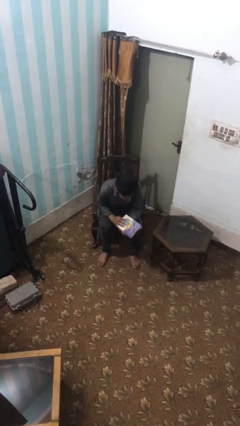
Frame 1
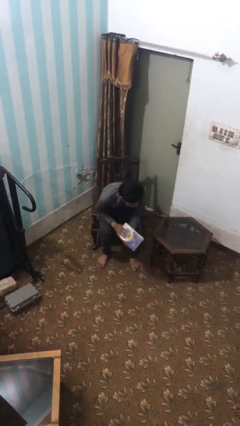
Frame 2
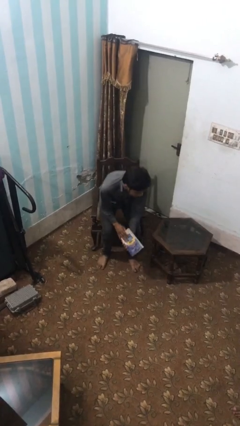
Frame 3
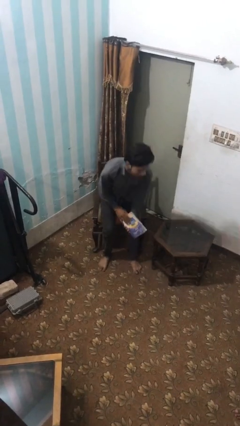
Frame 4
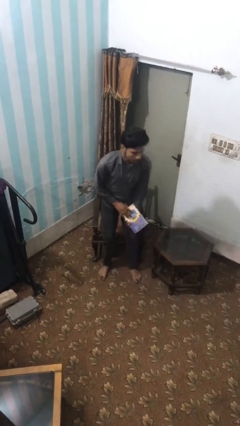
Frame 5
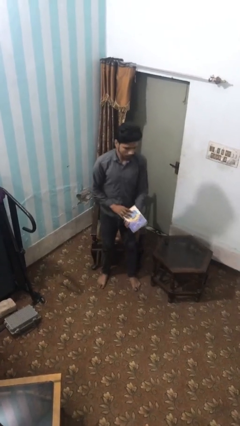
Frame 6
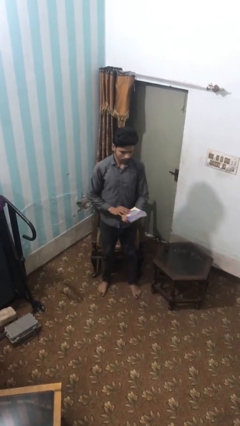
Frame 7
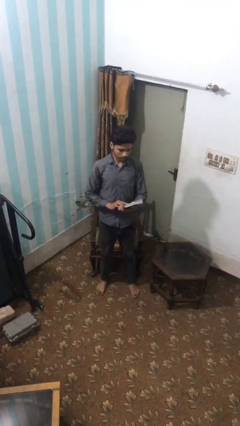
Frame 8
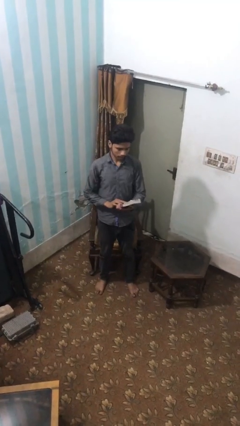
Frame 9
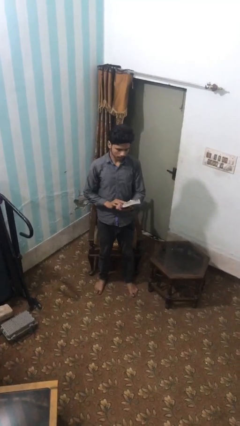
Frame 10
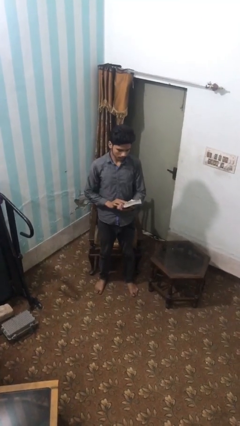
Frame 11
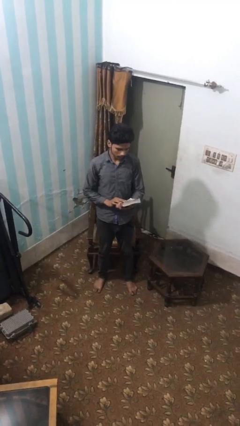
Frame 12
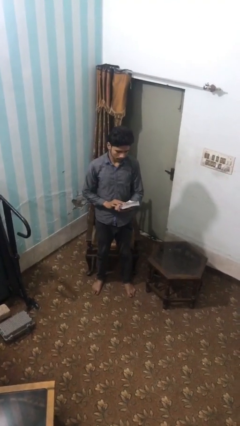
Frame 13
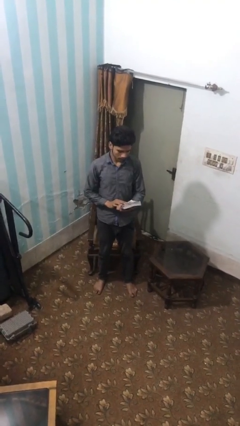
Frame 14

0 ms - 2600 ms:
person stands up

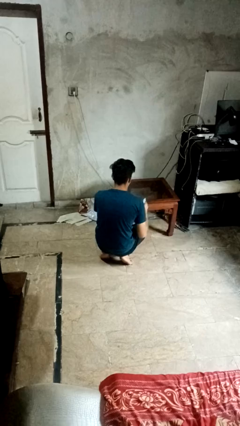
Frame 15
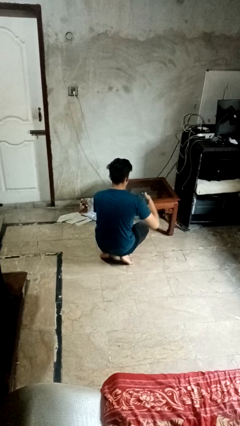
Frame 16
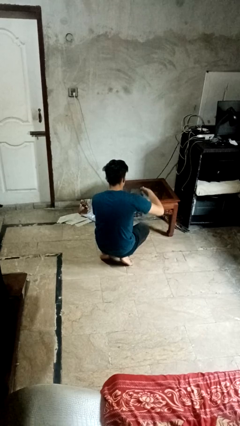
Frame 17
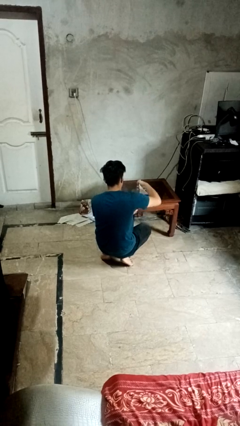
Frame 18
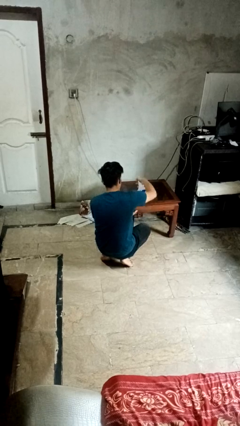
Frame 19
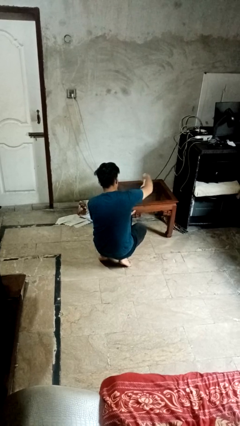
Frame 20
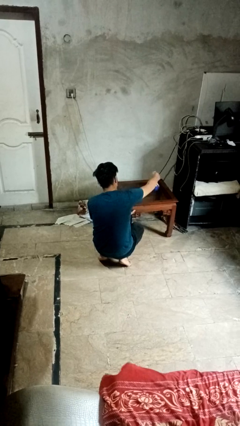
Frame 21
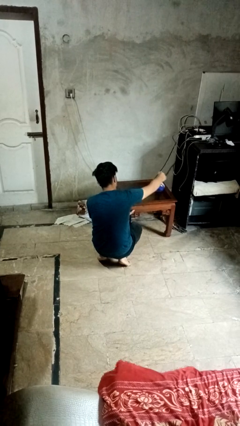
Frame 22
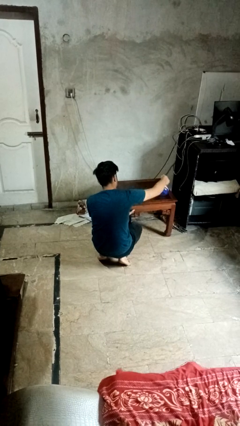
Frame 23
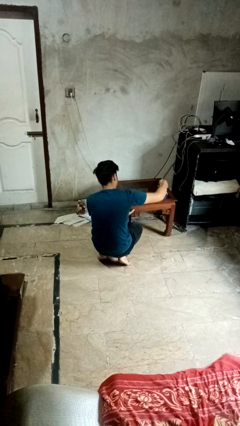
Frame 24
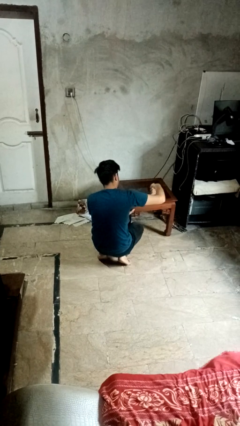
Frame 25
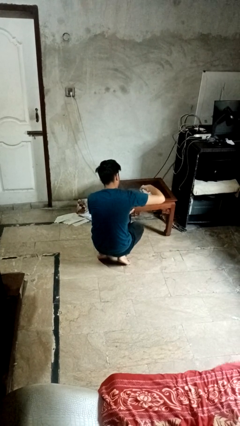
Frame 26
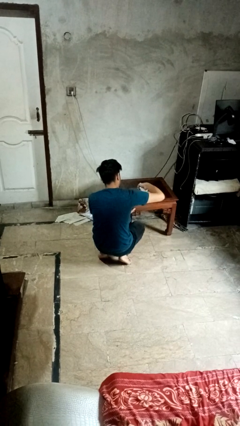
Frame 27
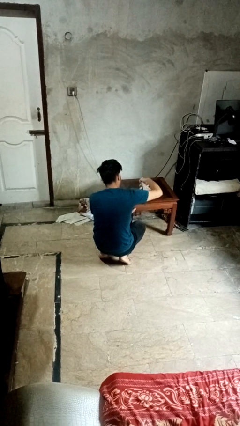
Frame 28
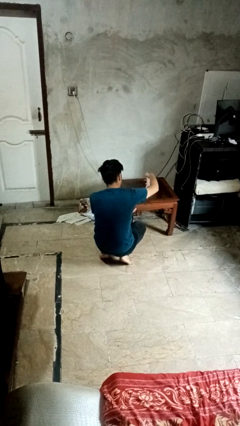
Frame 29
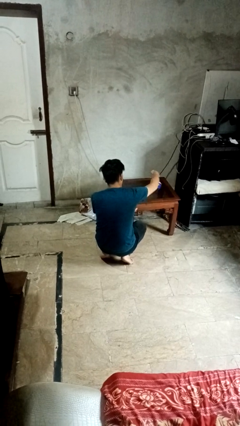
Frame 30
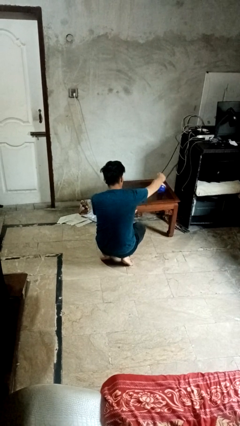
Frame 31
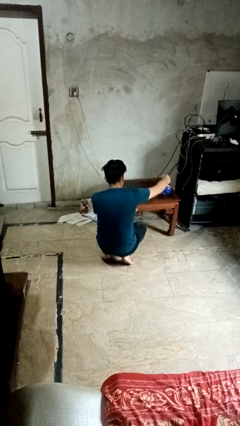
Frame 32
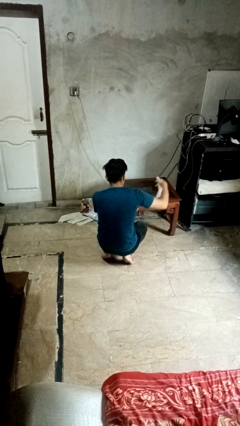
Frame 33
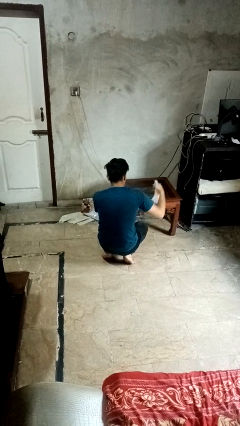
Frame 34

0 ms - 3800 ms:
person sprays from bottle

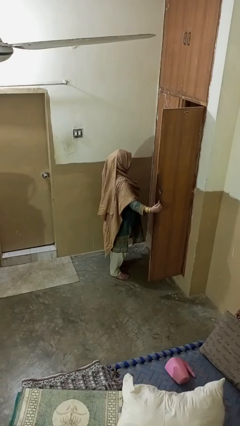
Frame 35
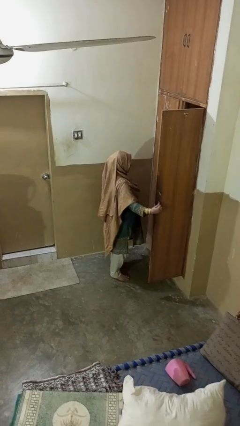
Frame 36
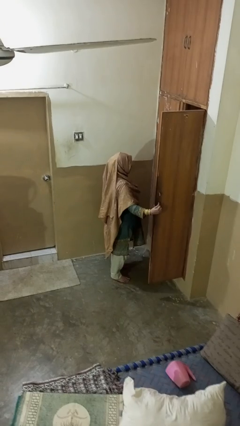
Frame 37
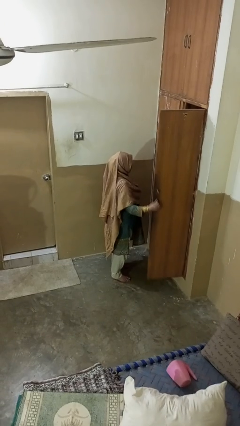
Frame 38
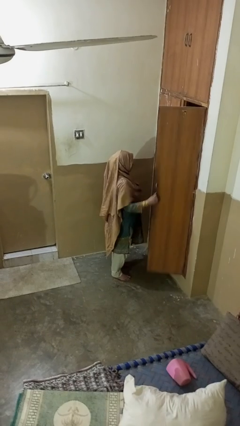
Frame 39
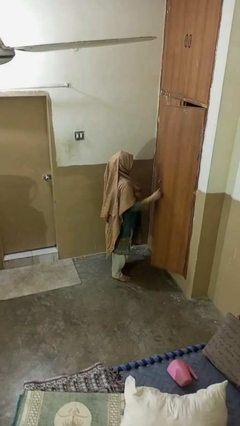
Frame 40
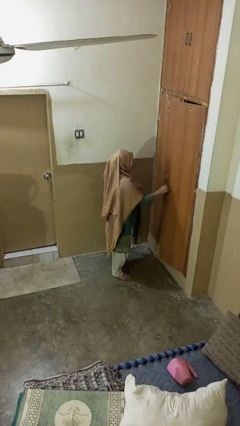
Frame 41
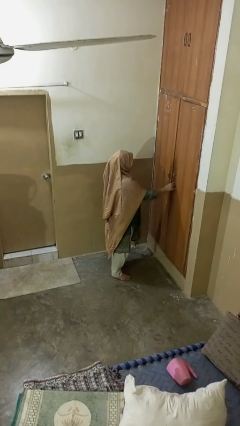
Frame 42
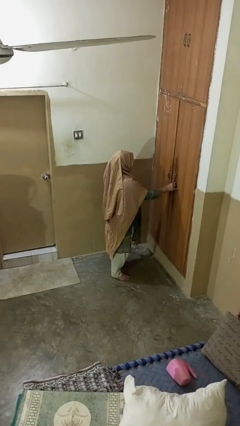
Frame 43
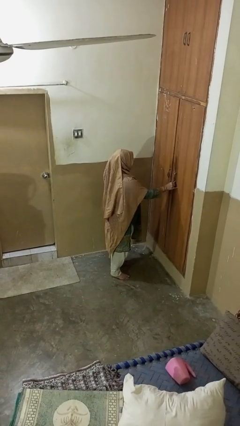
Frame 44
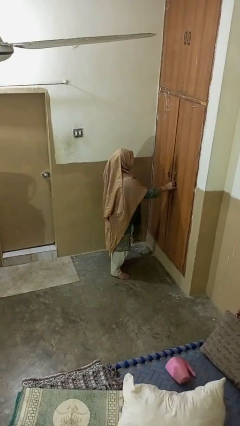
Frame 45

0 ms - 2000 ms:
person closes closet door

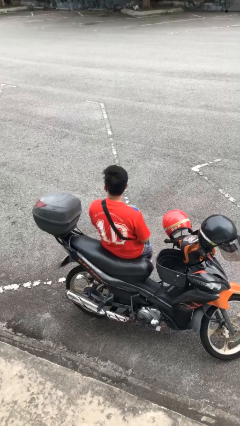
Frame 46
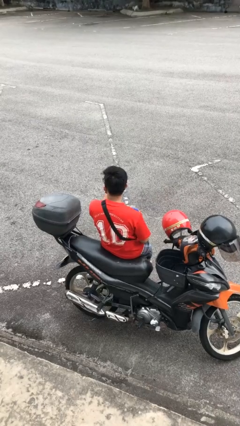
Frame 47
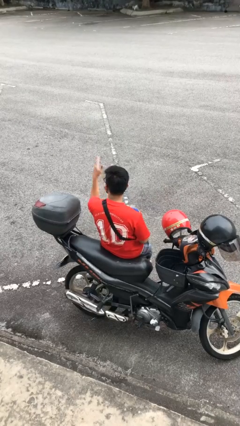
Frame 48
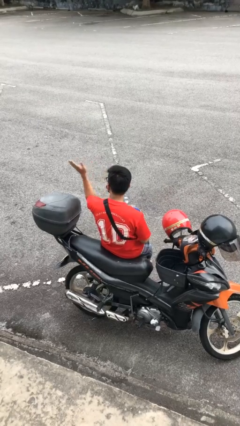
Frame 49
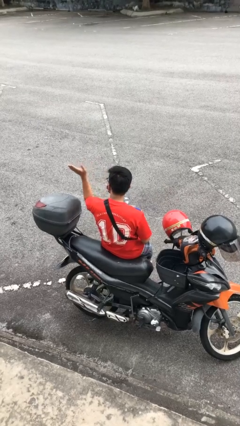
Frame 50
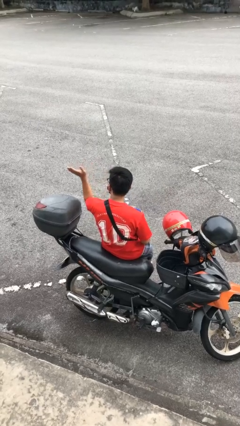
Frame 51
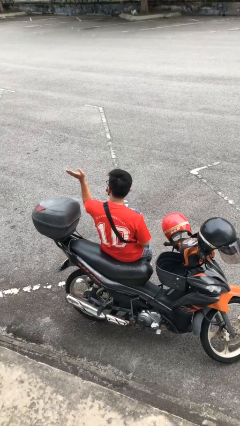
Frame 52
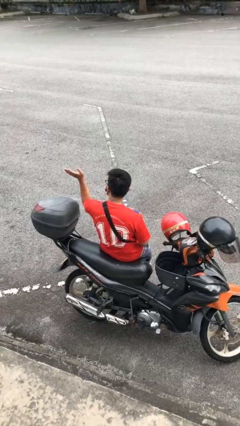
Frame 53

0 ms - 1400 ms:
person gestures swipe left

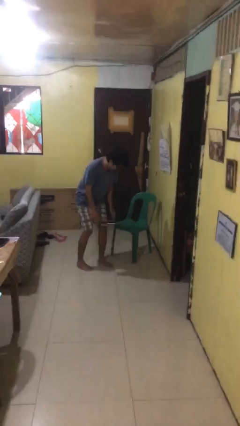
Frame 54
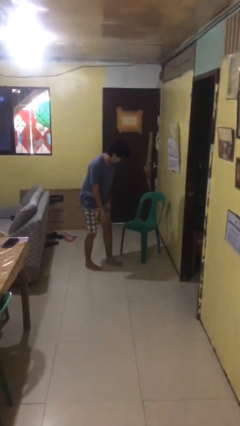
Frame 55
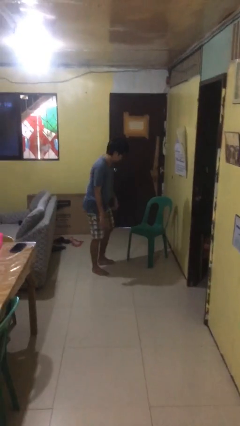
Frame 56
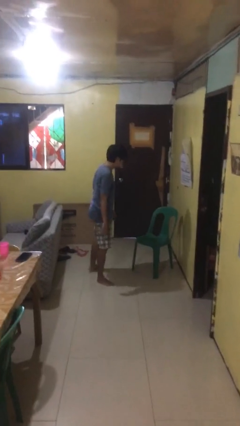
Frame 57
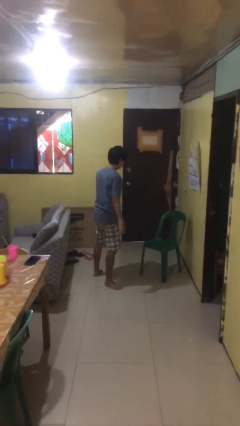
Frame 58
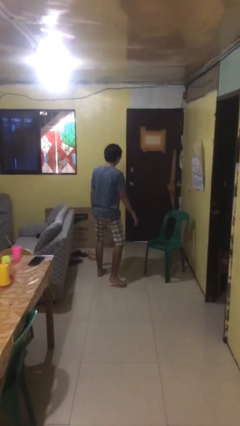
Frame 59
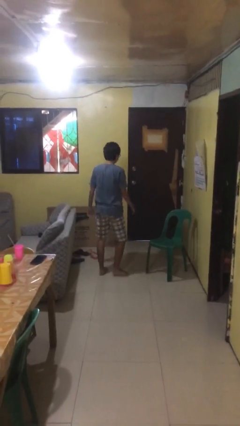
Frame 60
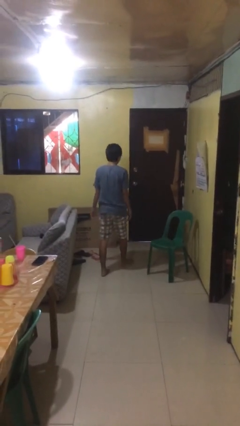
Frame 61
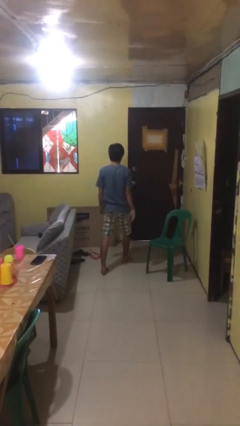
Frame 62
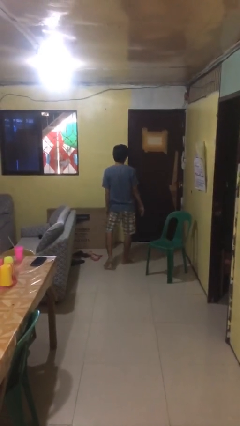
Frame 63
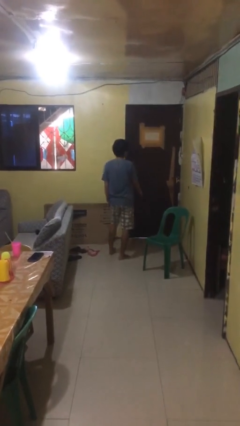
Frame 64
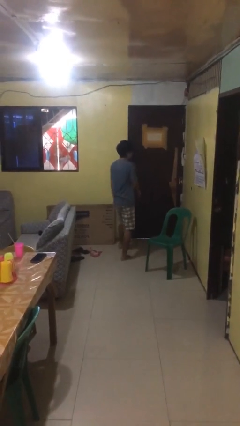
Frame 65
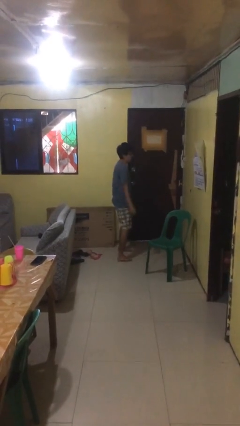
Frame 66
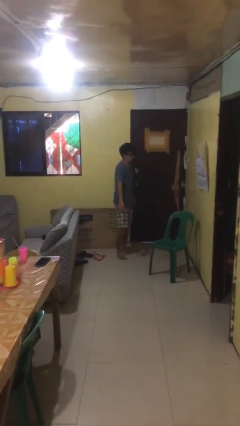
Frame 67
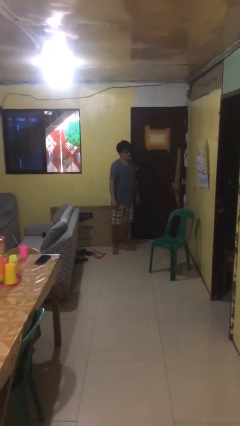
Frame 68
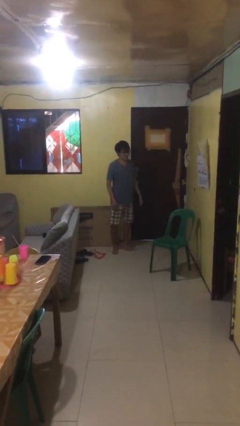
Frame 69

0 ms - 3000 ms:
person stands up from floor

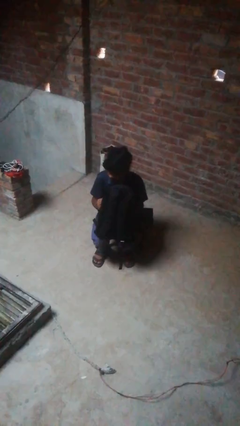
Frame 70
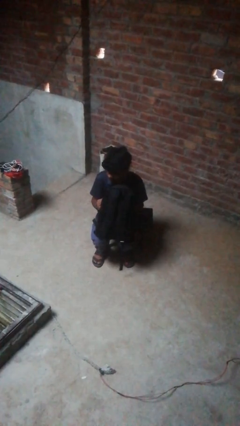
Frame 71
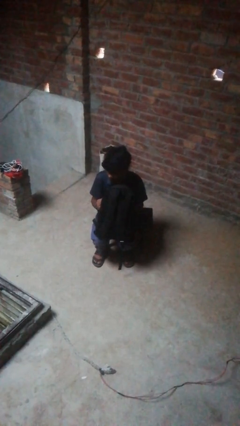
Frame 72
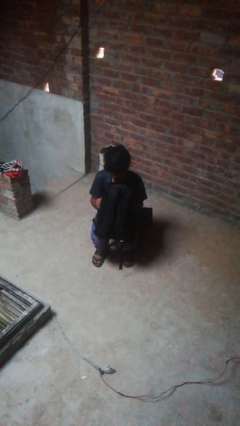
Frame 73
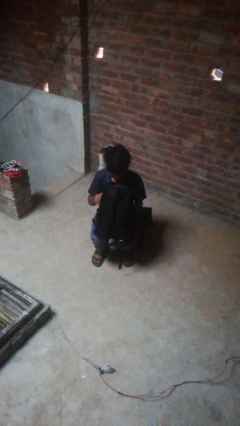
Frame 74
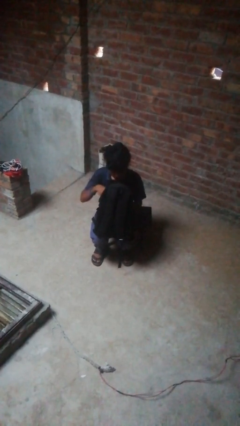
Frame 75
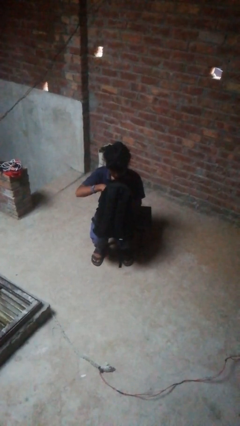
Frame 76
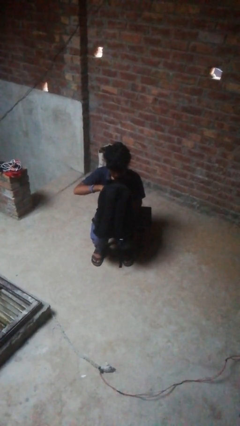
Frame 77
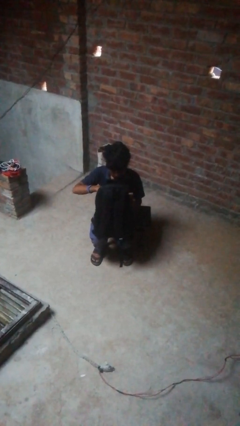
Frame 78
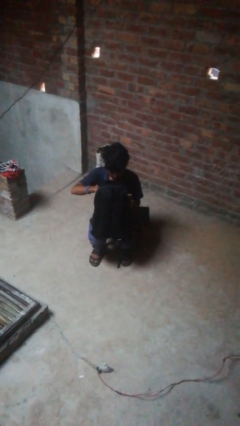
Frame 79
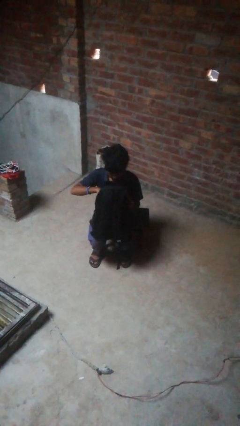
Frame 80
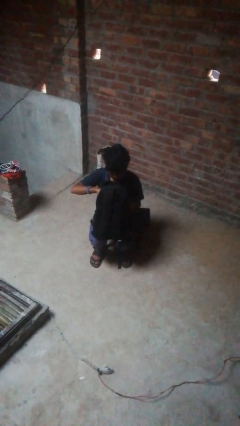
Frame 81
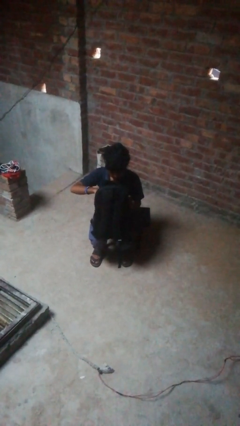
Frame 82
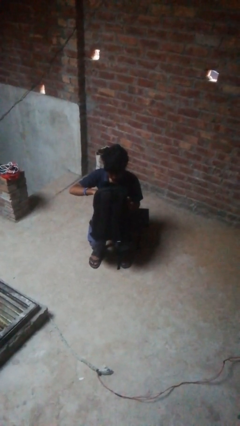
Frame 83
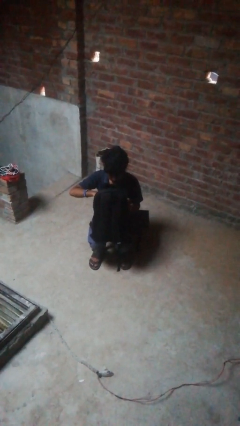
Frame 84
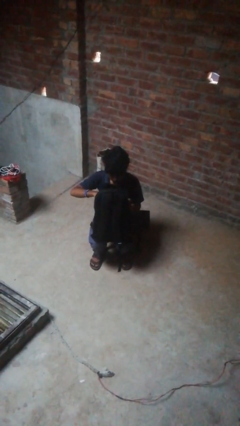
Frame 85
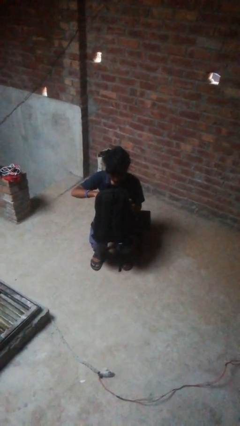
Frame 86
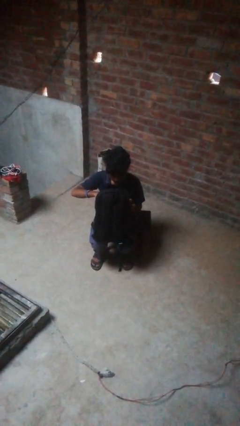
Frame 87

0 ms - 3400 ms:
person searches in backpack

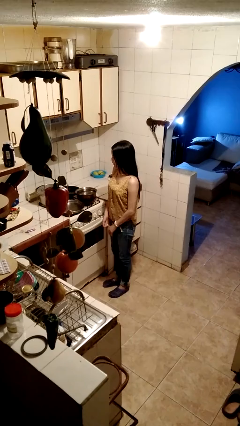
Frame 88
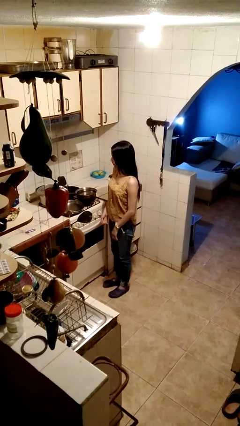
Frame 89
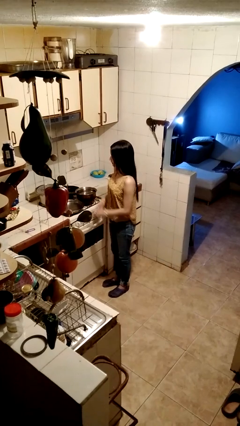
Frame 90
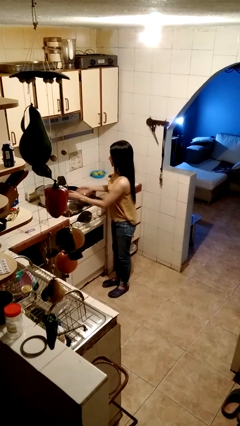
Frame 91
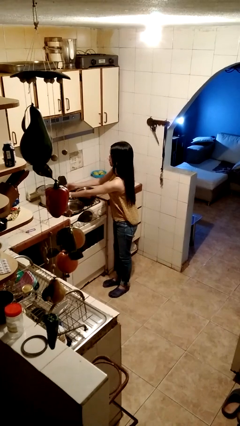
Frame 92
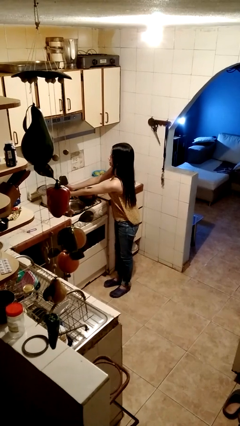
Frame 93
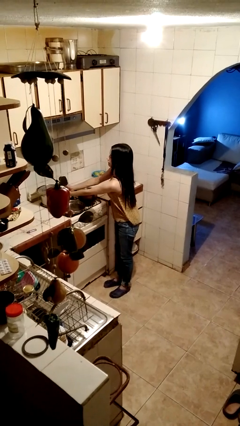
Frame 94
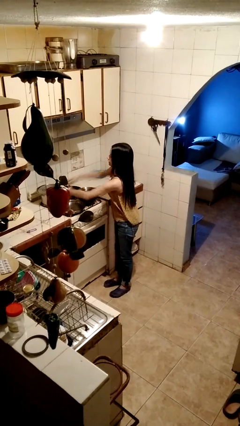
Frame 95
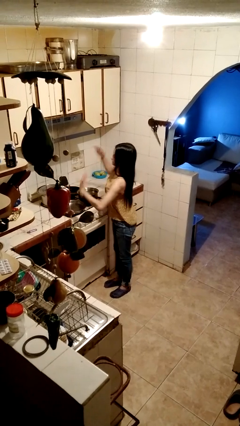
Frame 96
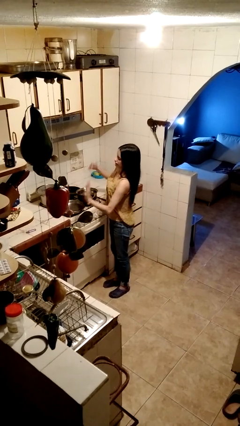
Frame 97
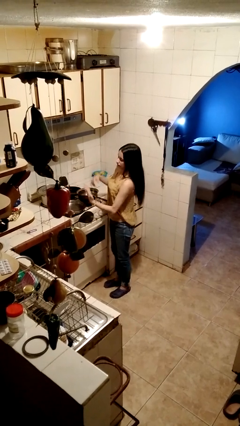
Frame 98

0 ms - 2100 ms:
person burns hand
